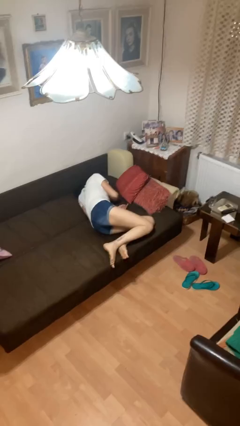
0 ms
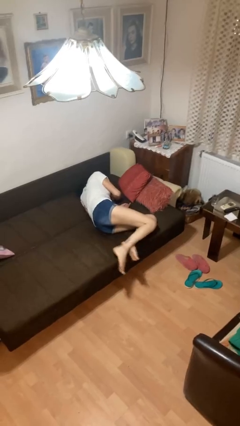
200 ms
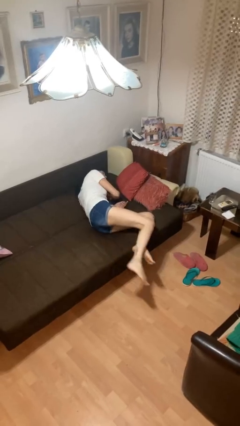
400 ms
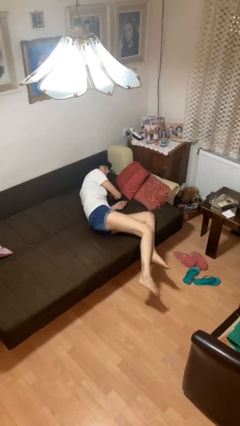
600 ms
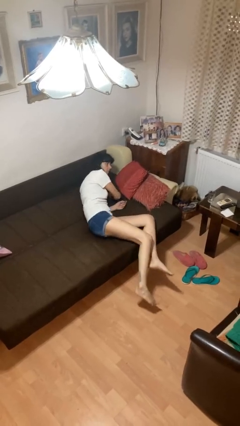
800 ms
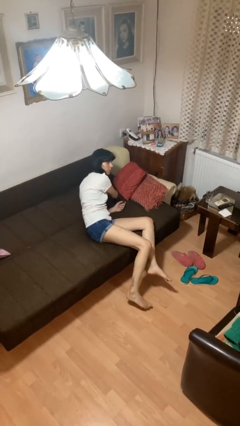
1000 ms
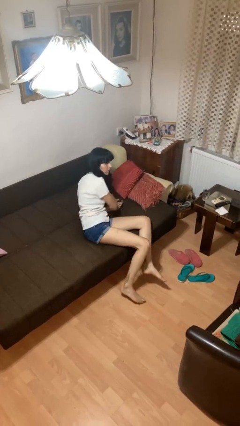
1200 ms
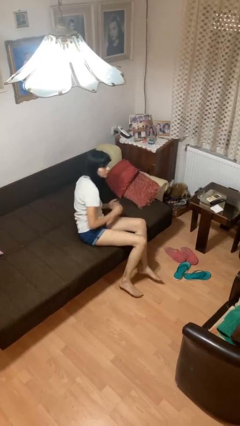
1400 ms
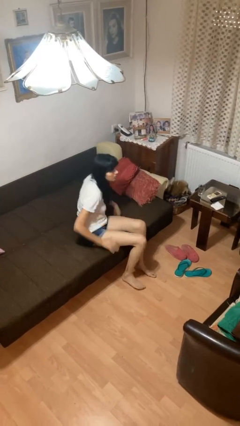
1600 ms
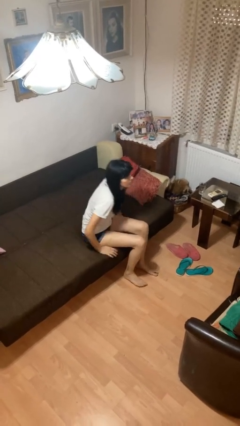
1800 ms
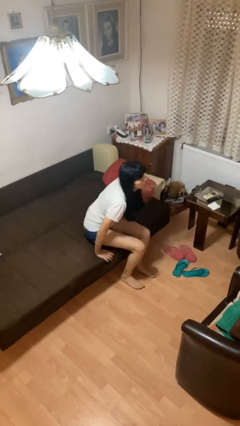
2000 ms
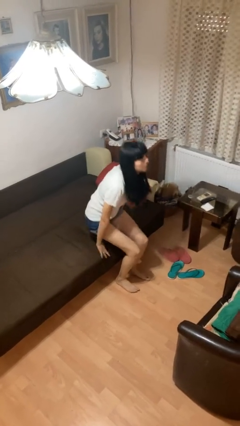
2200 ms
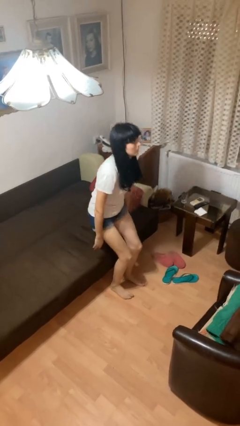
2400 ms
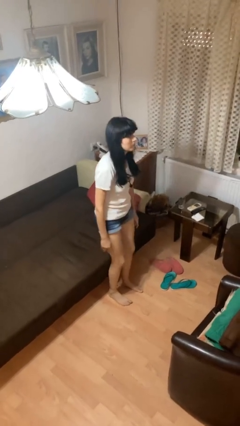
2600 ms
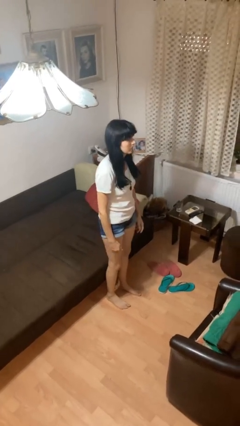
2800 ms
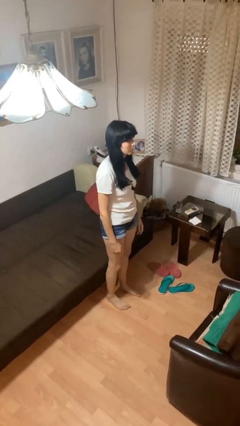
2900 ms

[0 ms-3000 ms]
person stands up

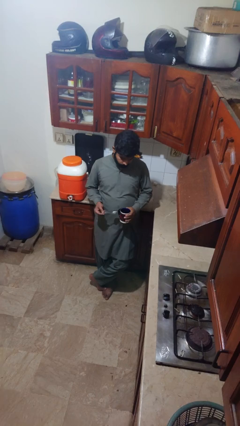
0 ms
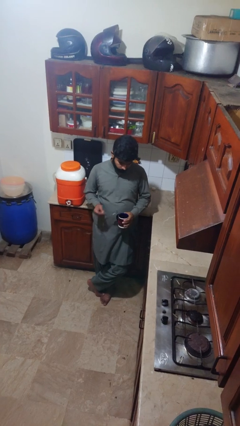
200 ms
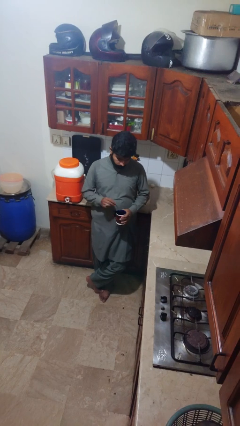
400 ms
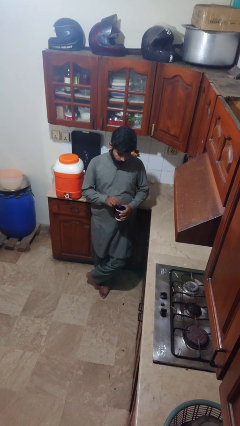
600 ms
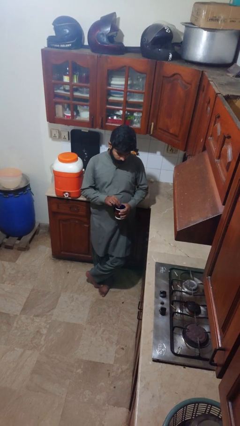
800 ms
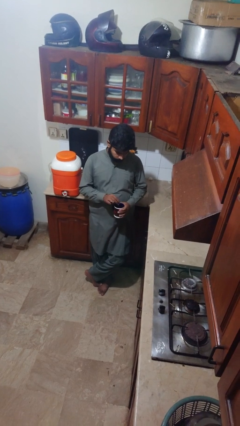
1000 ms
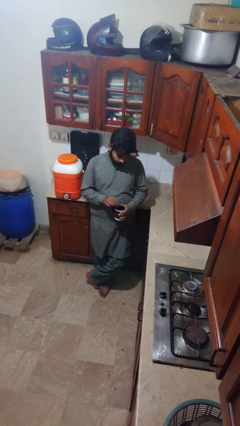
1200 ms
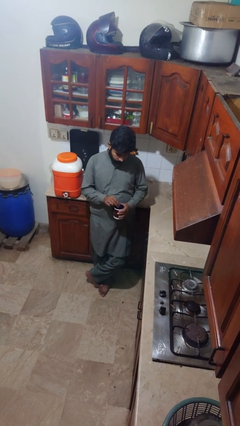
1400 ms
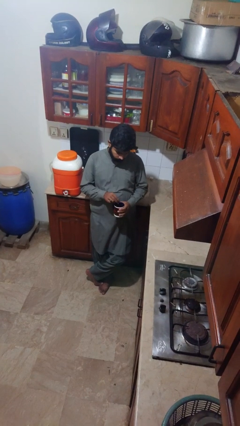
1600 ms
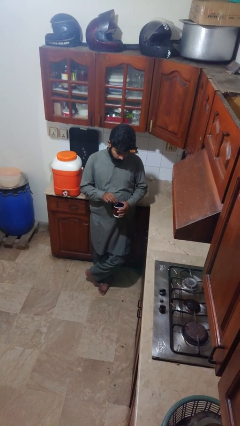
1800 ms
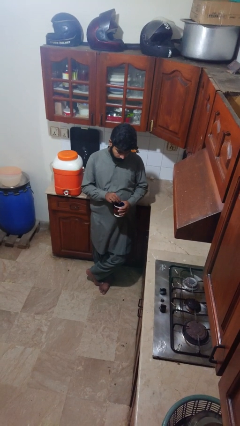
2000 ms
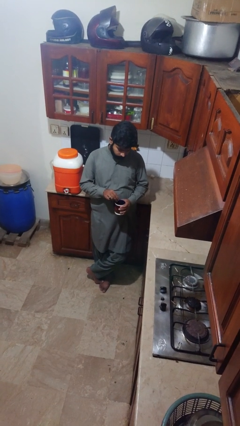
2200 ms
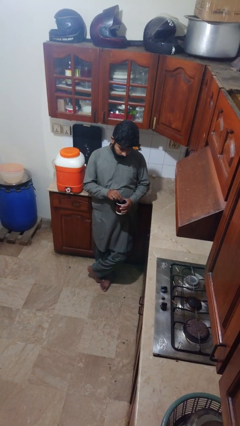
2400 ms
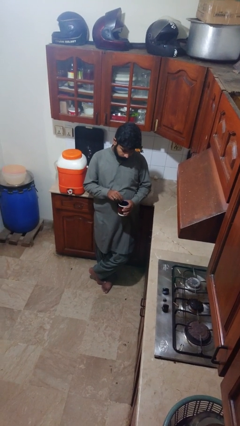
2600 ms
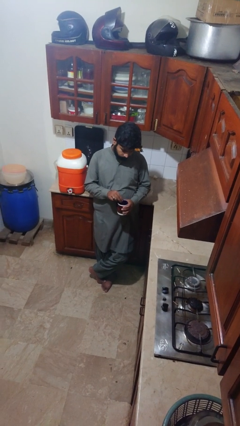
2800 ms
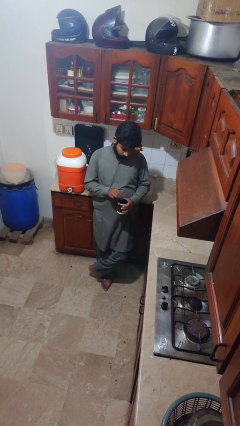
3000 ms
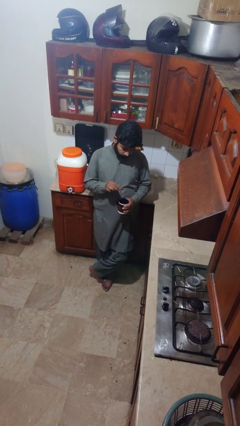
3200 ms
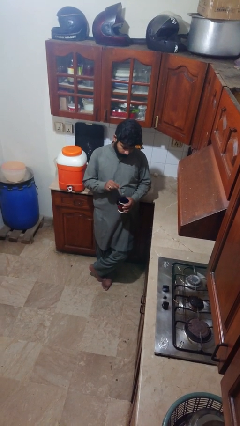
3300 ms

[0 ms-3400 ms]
person stirs mug

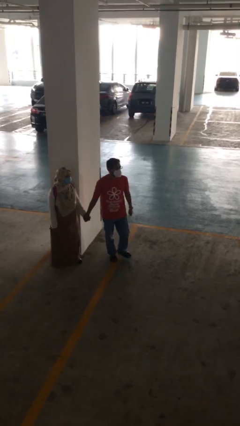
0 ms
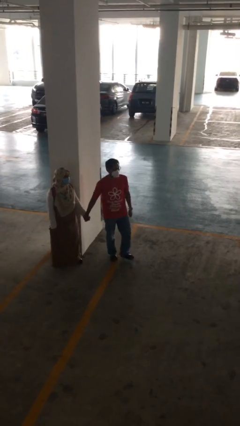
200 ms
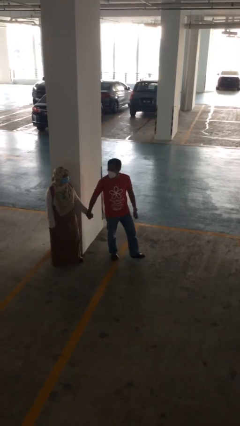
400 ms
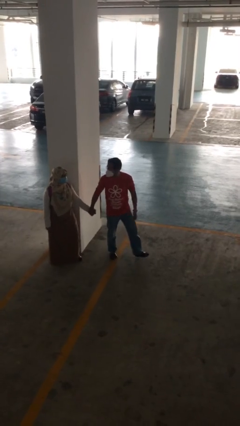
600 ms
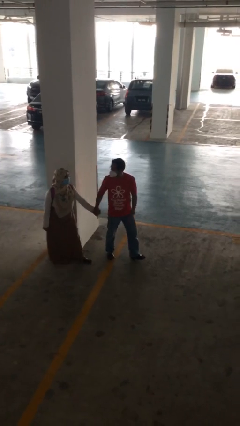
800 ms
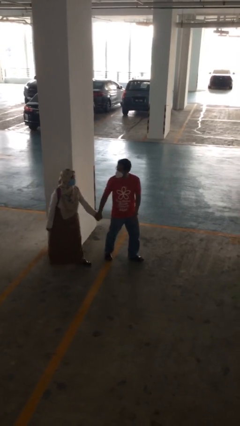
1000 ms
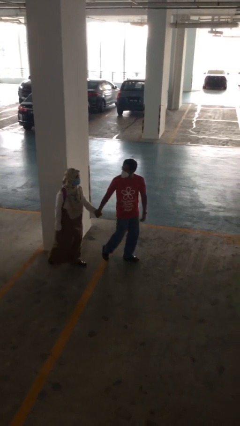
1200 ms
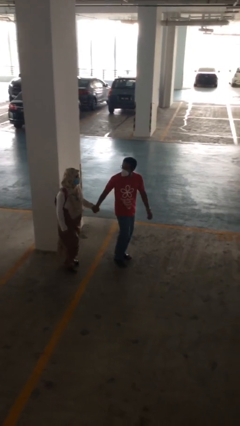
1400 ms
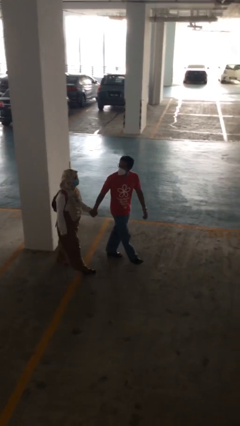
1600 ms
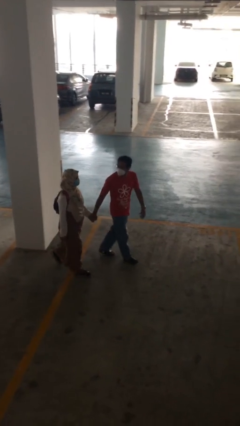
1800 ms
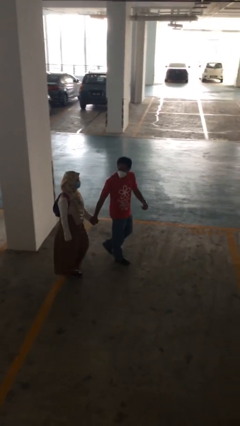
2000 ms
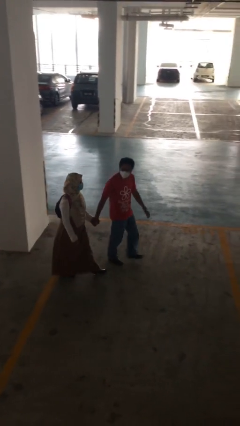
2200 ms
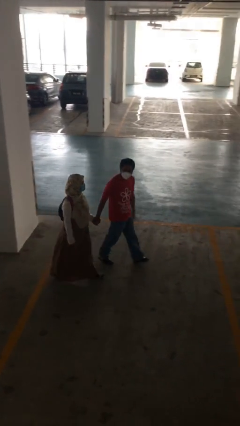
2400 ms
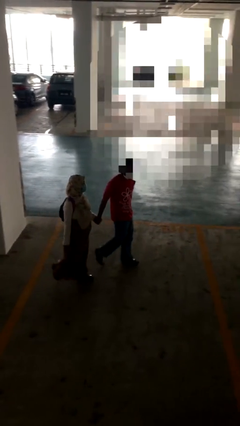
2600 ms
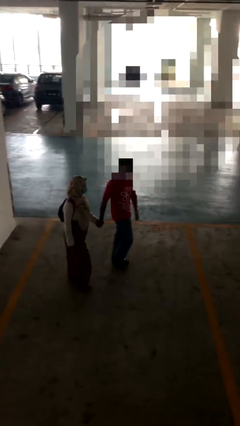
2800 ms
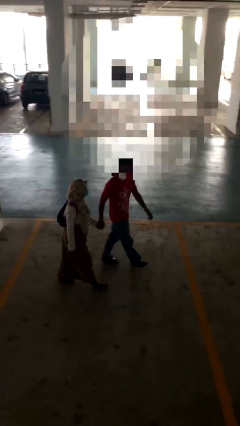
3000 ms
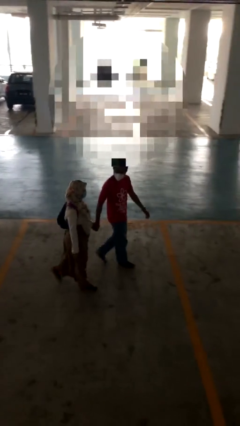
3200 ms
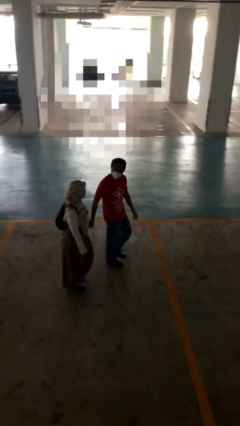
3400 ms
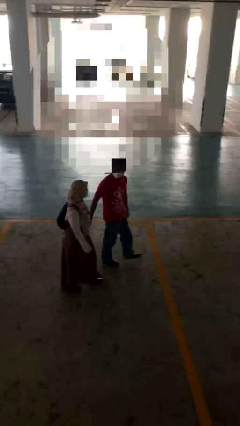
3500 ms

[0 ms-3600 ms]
person holds hand

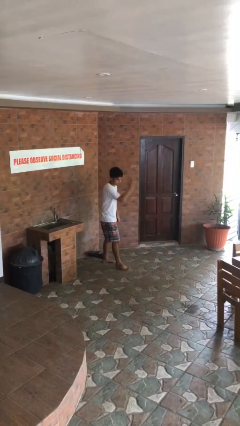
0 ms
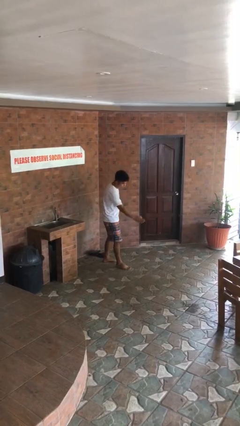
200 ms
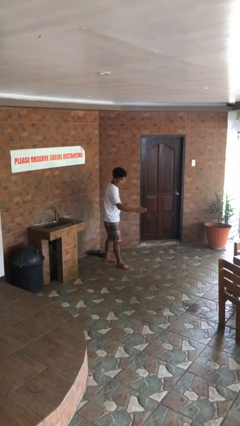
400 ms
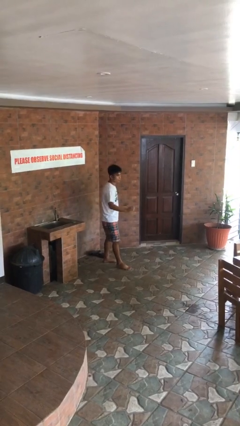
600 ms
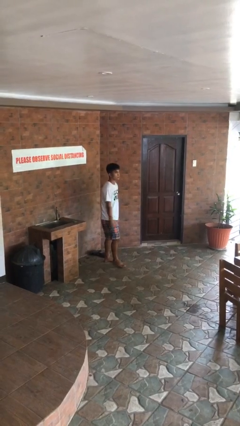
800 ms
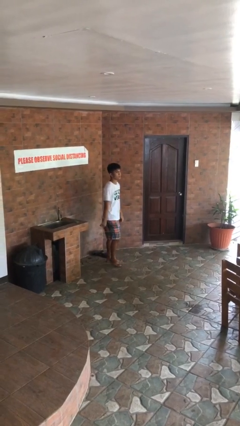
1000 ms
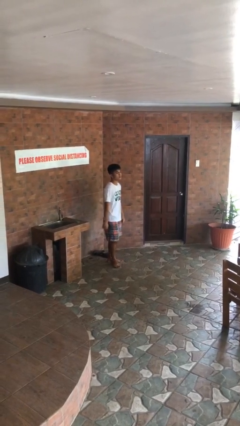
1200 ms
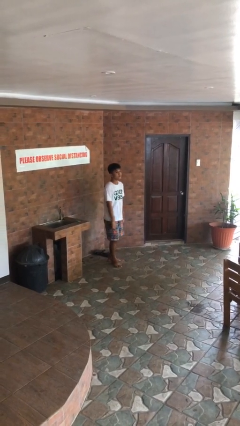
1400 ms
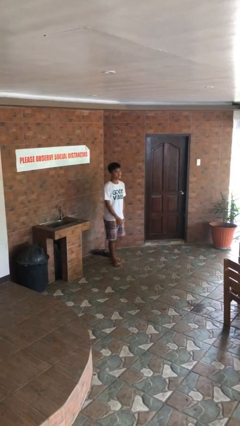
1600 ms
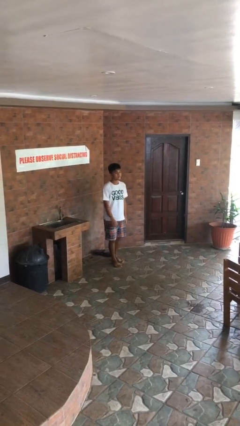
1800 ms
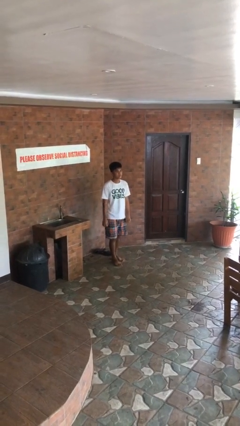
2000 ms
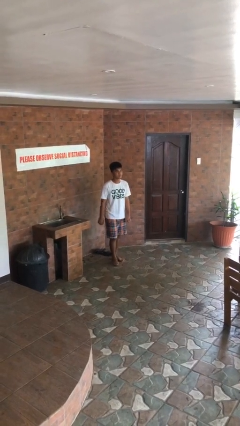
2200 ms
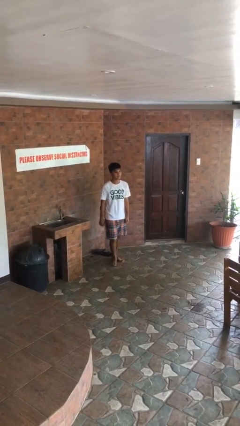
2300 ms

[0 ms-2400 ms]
person karate chop

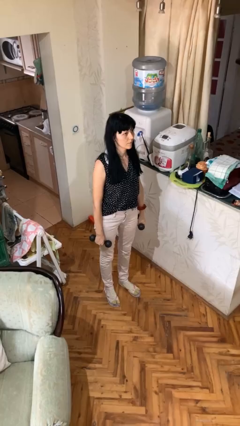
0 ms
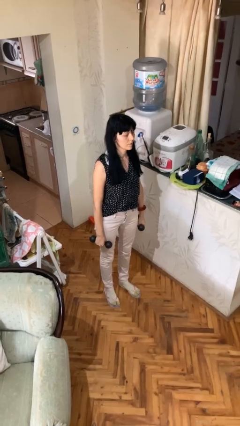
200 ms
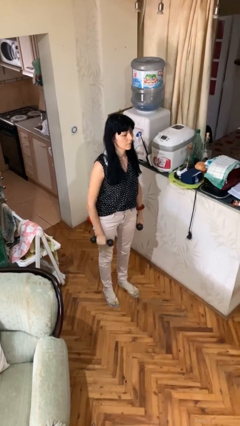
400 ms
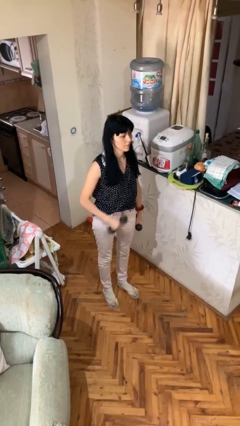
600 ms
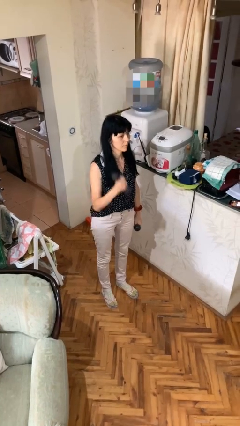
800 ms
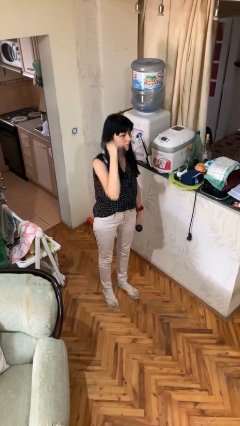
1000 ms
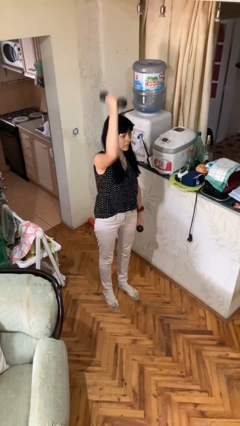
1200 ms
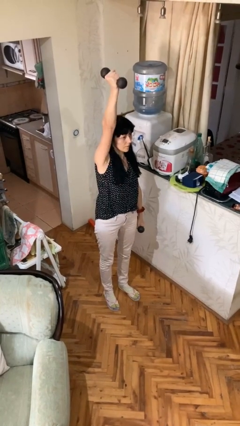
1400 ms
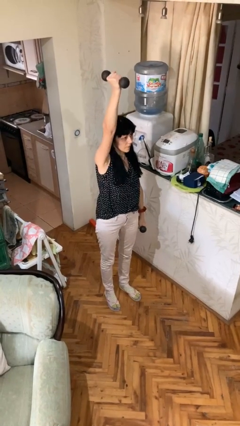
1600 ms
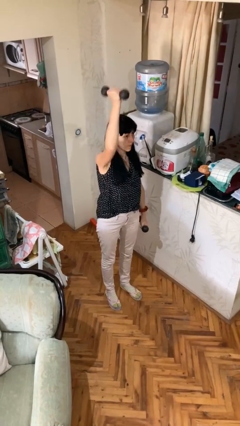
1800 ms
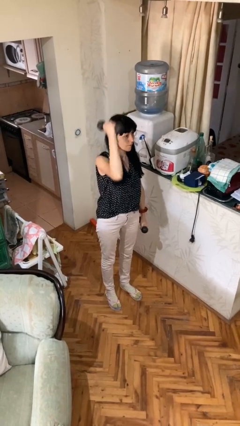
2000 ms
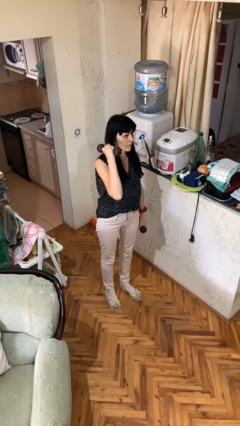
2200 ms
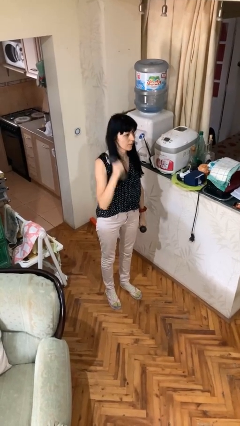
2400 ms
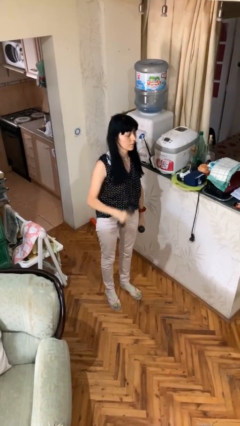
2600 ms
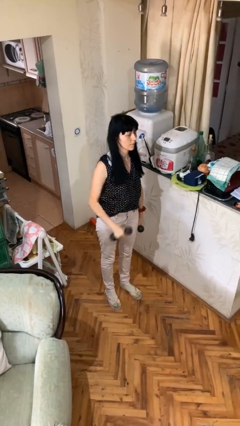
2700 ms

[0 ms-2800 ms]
person lifts dumbbells

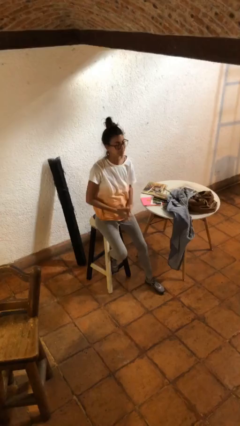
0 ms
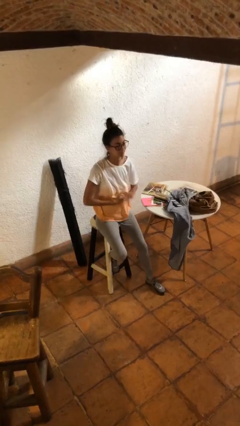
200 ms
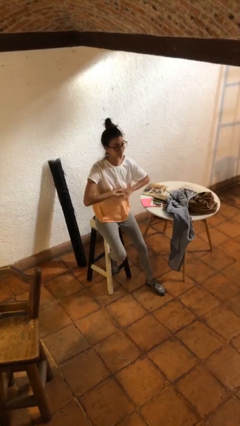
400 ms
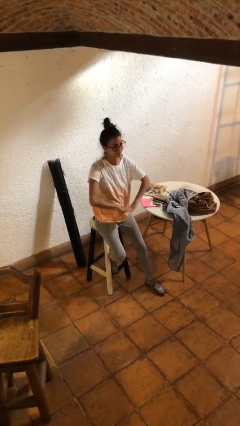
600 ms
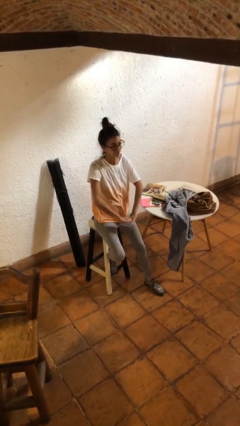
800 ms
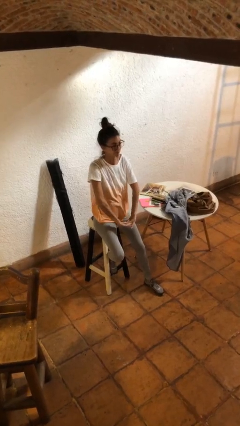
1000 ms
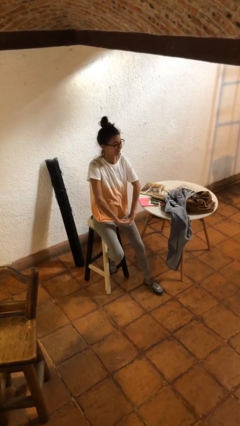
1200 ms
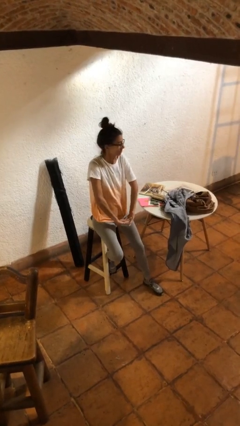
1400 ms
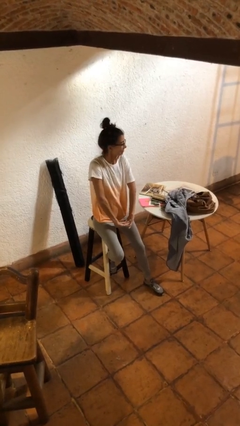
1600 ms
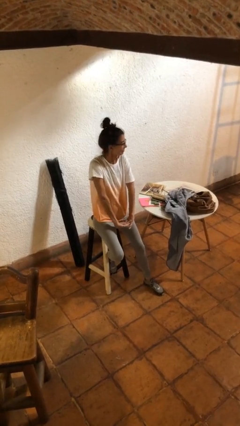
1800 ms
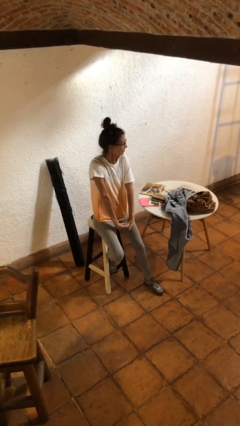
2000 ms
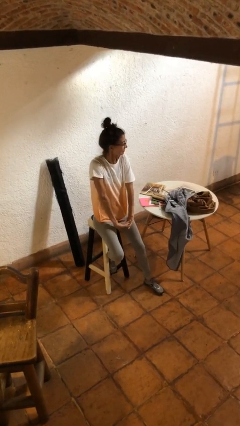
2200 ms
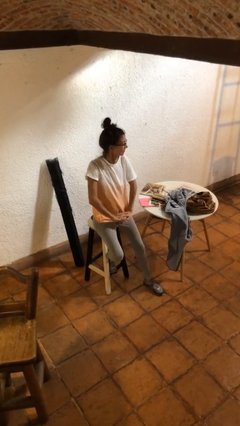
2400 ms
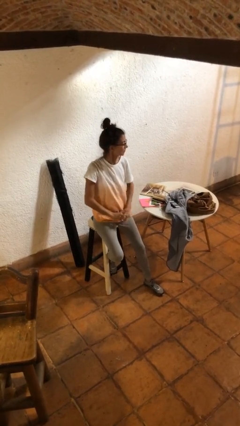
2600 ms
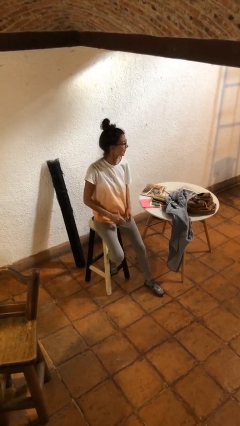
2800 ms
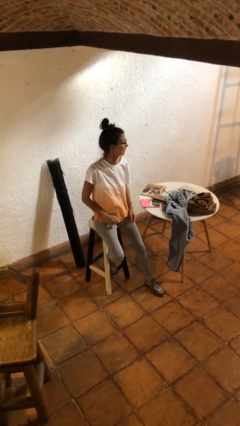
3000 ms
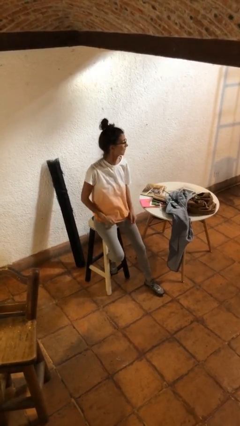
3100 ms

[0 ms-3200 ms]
person cracks knuckles
